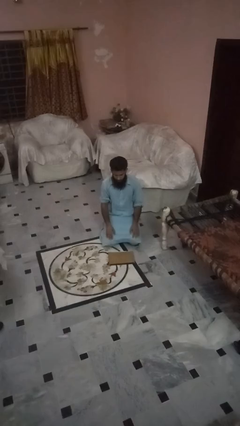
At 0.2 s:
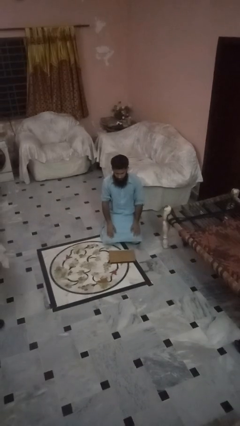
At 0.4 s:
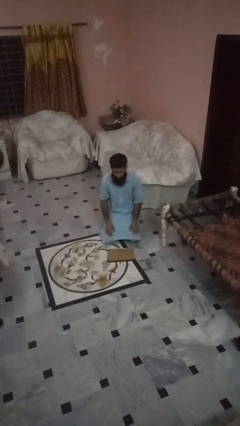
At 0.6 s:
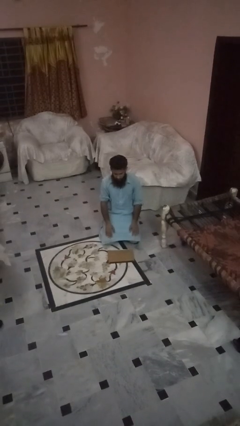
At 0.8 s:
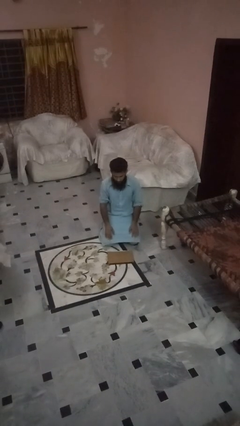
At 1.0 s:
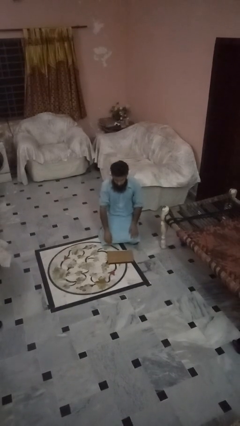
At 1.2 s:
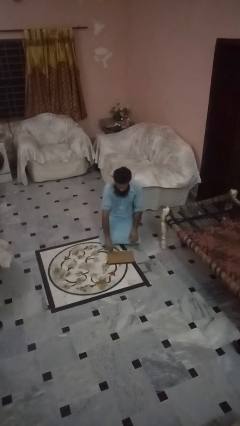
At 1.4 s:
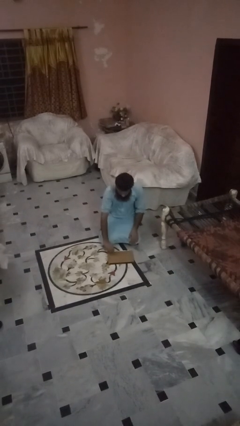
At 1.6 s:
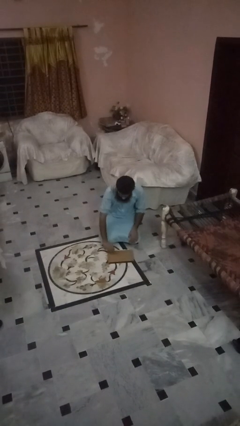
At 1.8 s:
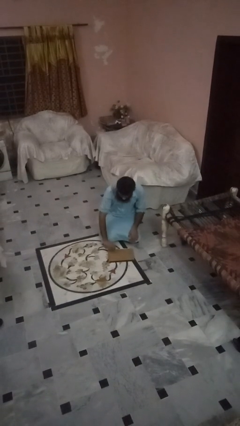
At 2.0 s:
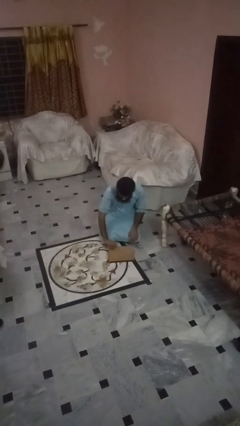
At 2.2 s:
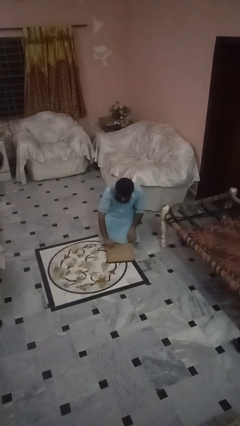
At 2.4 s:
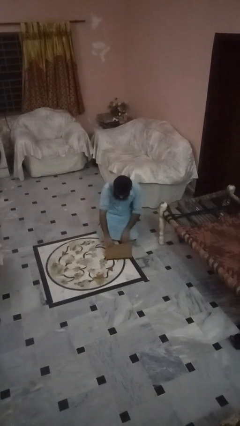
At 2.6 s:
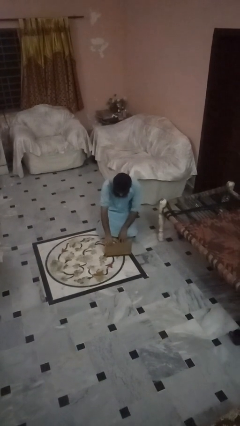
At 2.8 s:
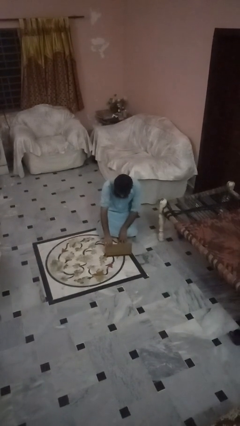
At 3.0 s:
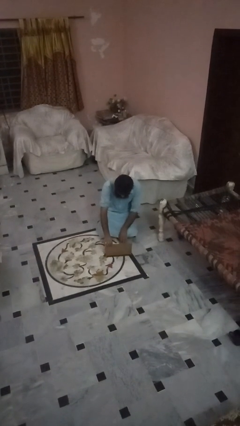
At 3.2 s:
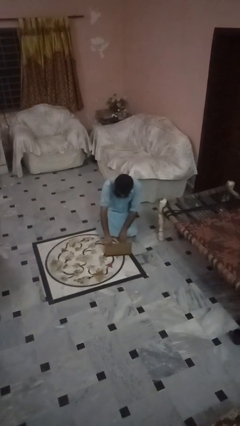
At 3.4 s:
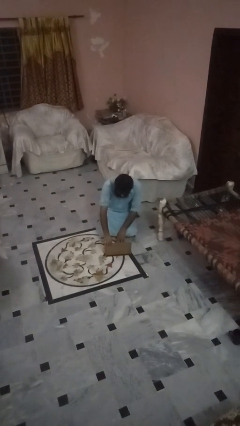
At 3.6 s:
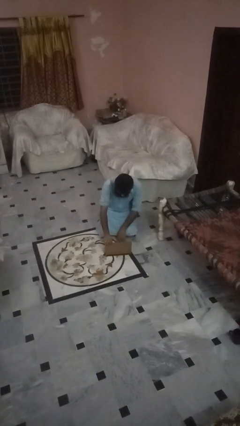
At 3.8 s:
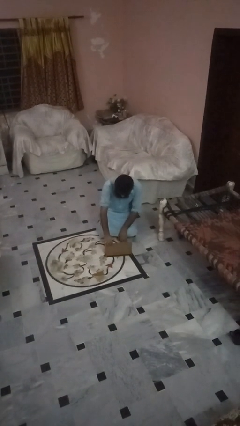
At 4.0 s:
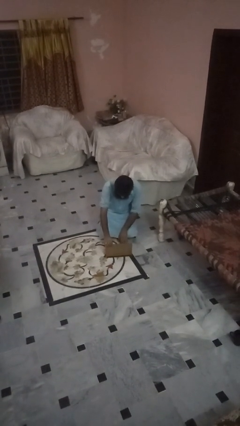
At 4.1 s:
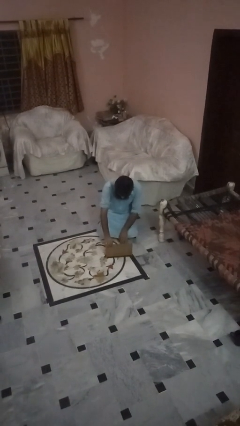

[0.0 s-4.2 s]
person opens laptop

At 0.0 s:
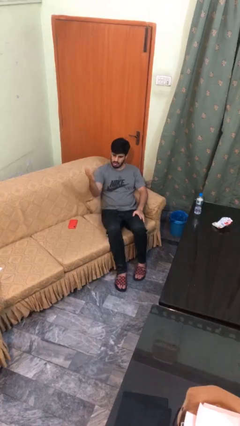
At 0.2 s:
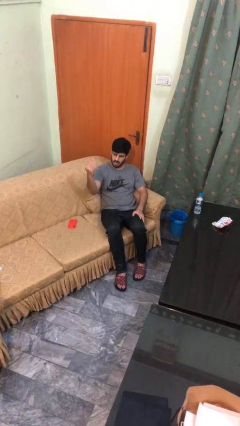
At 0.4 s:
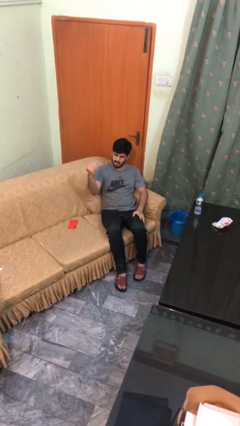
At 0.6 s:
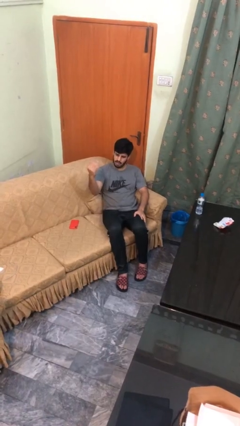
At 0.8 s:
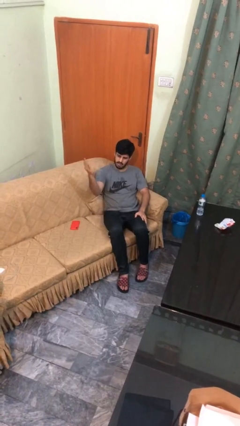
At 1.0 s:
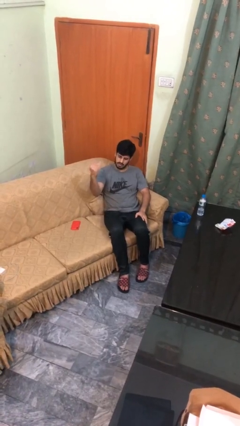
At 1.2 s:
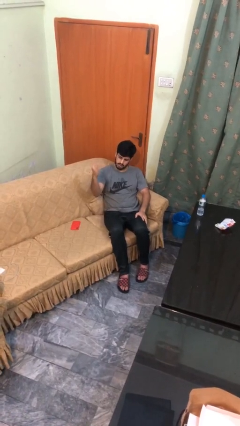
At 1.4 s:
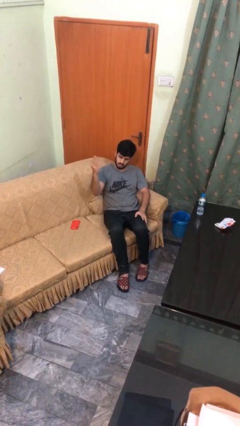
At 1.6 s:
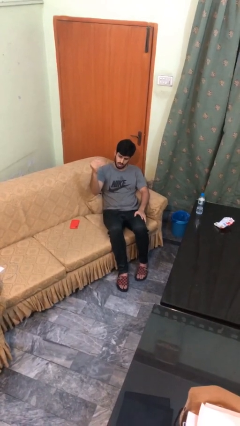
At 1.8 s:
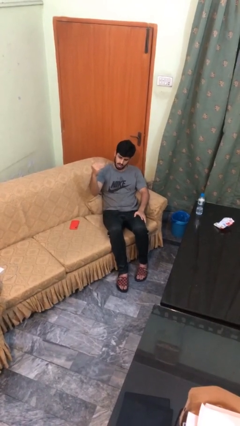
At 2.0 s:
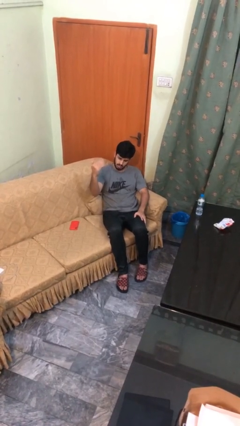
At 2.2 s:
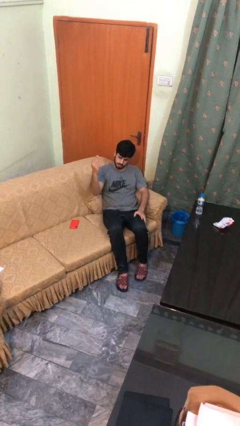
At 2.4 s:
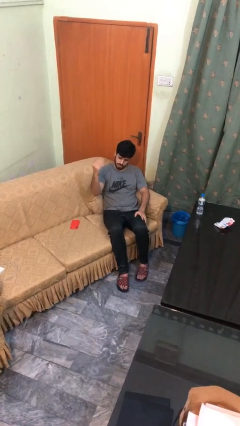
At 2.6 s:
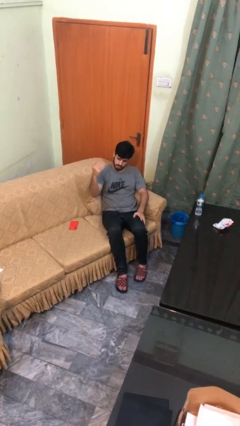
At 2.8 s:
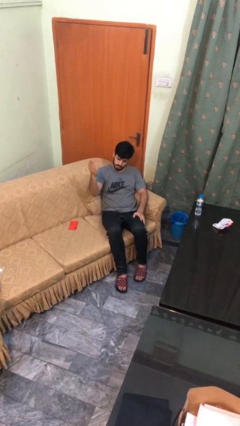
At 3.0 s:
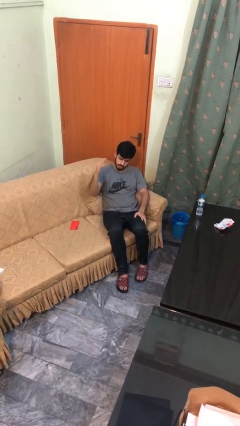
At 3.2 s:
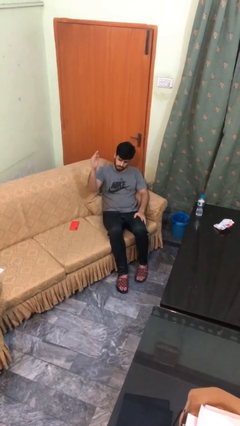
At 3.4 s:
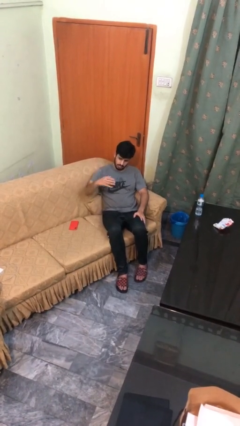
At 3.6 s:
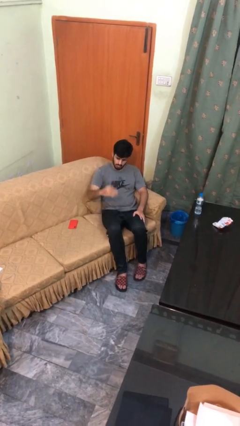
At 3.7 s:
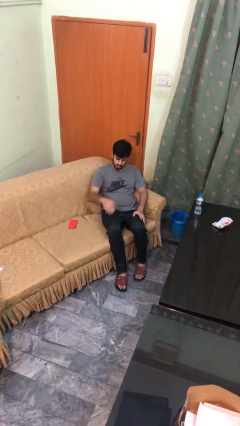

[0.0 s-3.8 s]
person gestures come here

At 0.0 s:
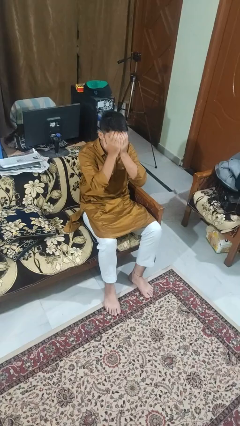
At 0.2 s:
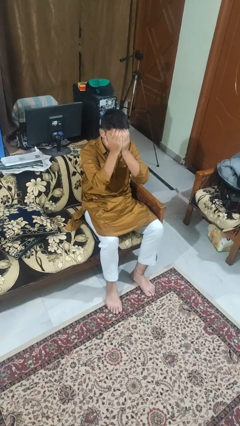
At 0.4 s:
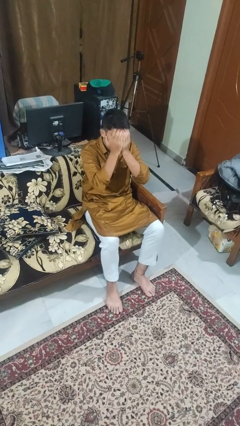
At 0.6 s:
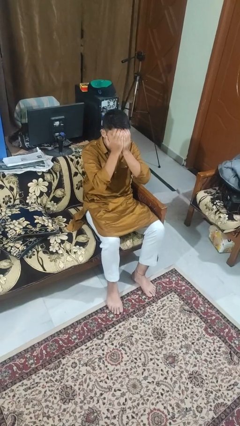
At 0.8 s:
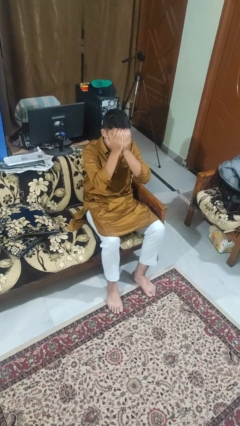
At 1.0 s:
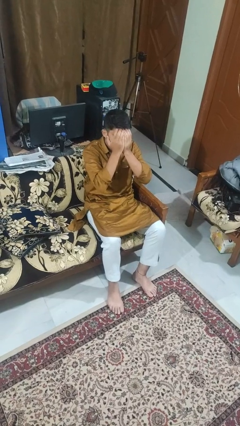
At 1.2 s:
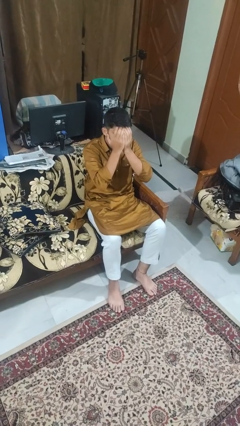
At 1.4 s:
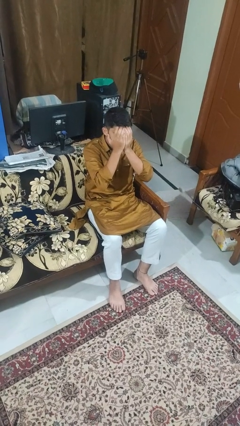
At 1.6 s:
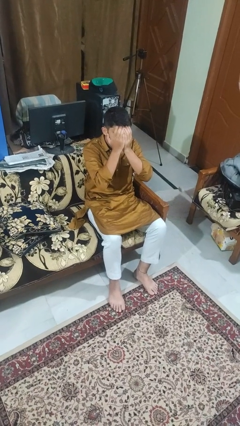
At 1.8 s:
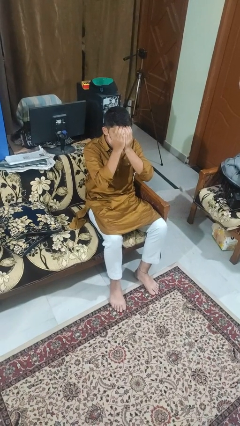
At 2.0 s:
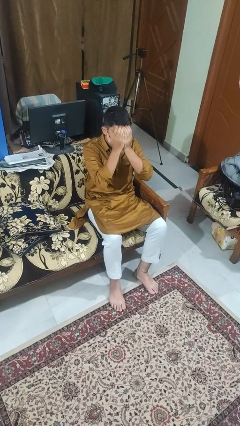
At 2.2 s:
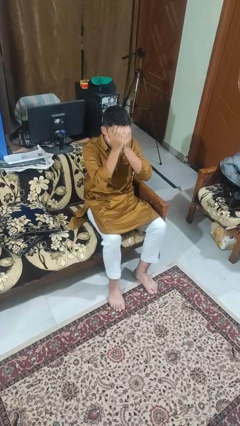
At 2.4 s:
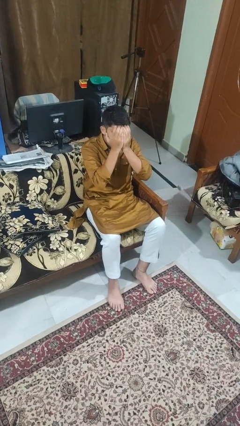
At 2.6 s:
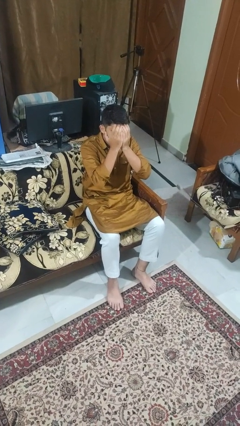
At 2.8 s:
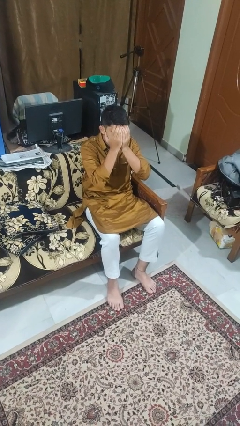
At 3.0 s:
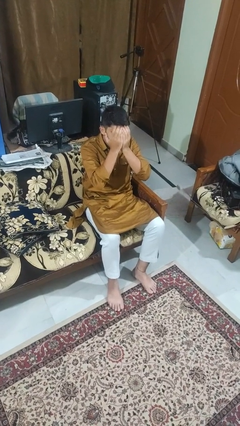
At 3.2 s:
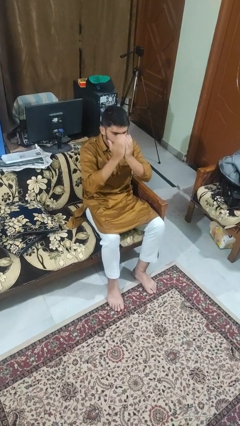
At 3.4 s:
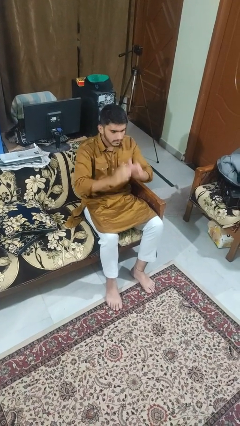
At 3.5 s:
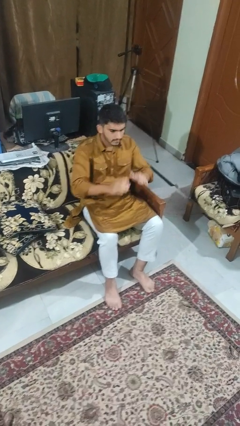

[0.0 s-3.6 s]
person covers face with hands

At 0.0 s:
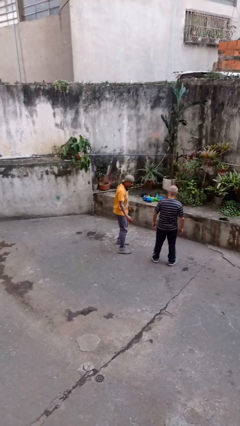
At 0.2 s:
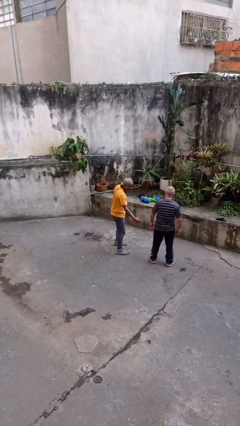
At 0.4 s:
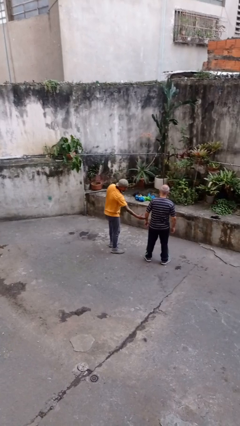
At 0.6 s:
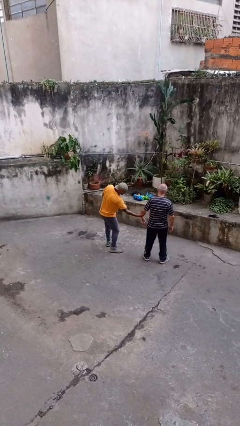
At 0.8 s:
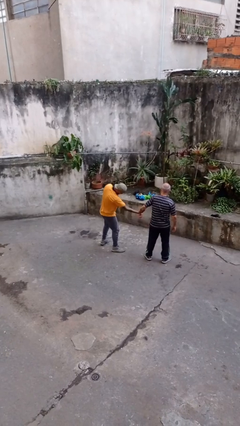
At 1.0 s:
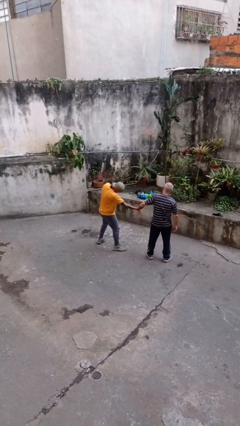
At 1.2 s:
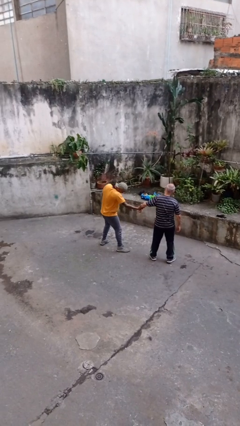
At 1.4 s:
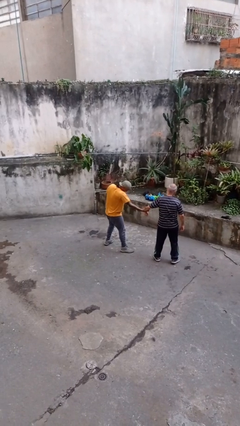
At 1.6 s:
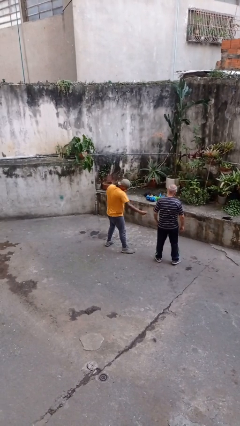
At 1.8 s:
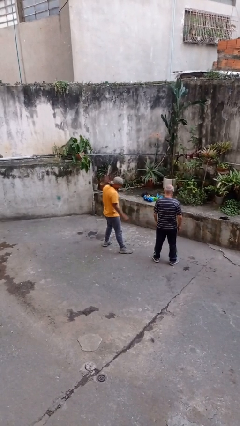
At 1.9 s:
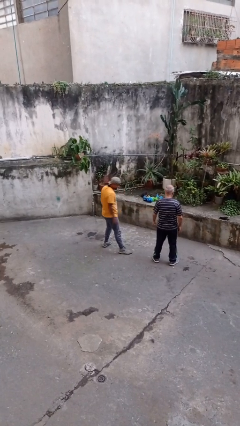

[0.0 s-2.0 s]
person grabs person by forearm

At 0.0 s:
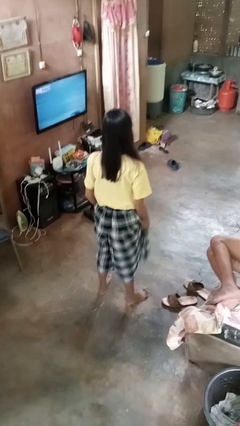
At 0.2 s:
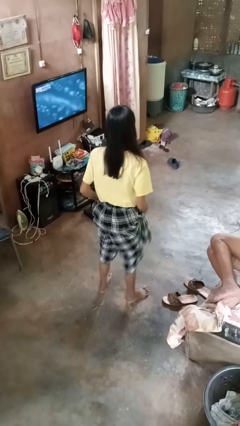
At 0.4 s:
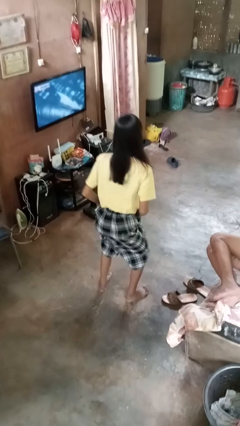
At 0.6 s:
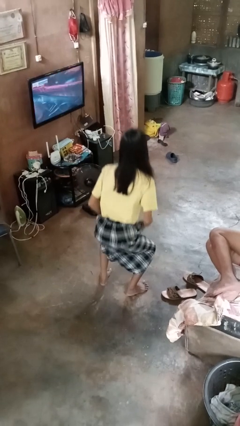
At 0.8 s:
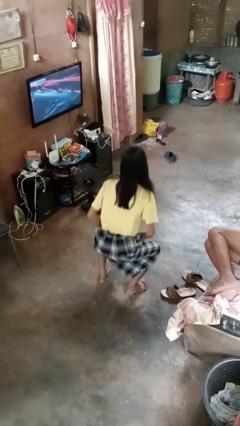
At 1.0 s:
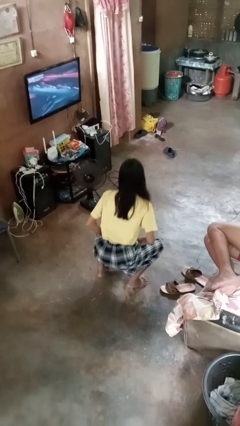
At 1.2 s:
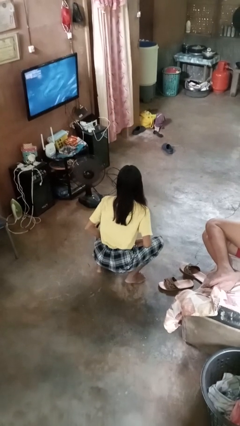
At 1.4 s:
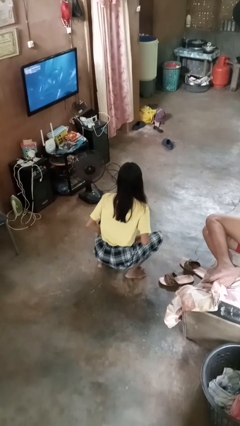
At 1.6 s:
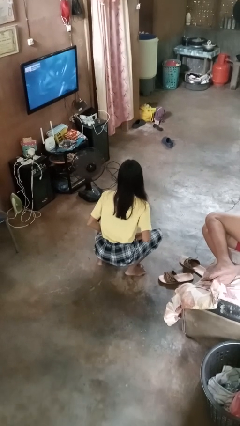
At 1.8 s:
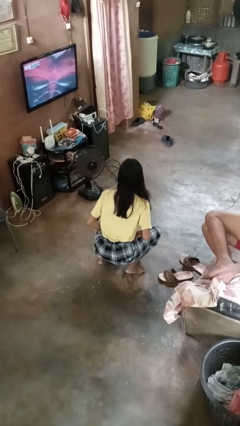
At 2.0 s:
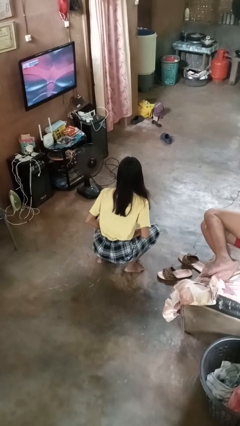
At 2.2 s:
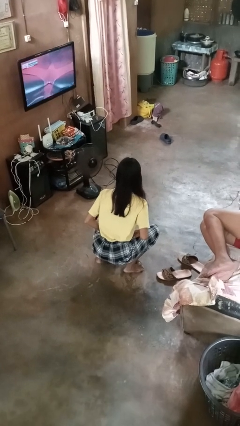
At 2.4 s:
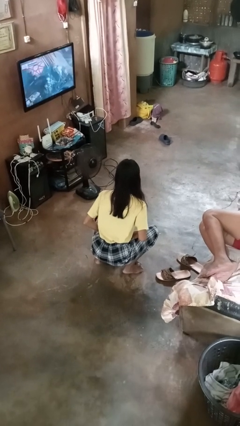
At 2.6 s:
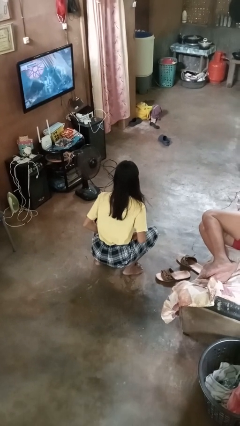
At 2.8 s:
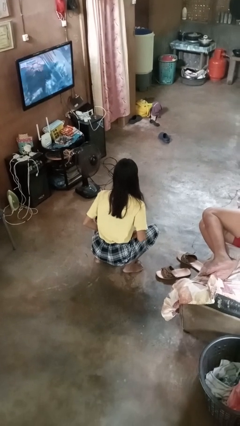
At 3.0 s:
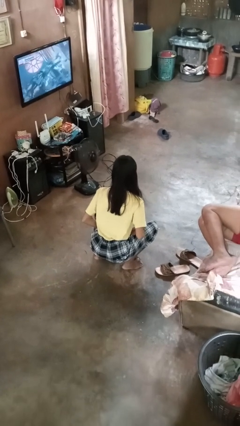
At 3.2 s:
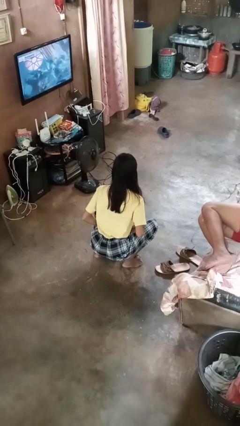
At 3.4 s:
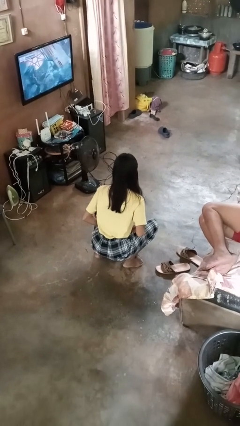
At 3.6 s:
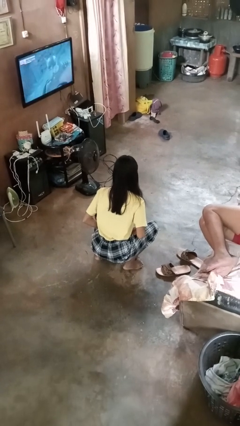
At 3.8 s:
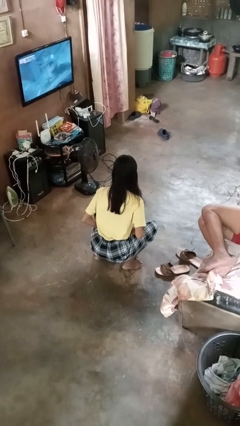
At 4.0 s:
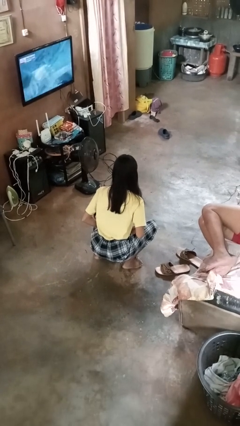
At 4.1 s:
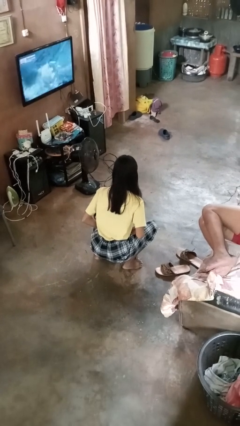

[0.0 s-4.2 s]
person squats
